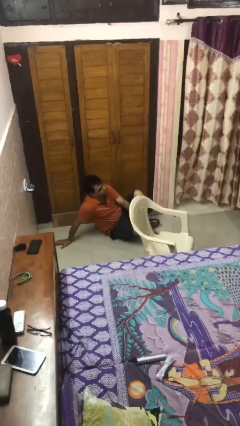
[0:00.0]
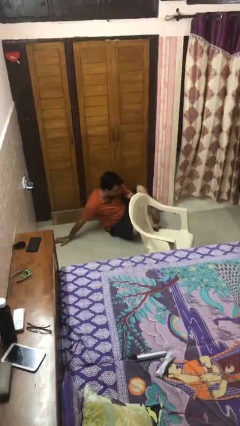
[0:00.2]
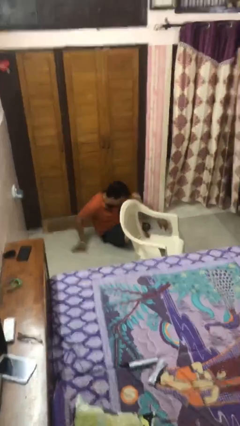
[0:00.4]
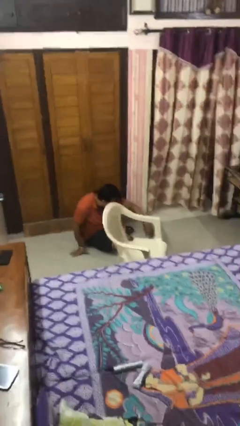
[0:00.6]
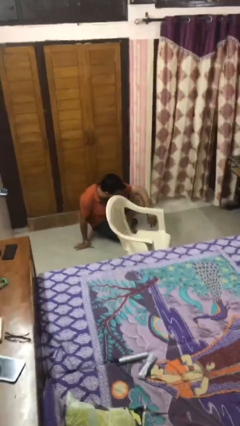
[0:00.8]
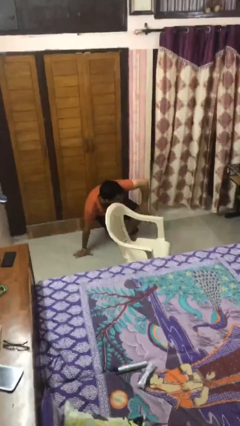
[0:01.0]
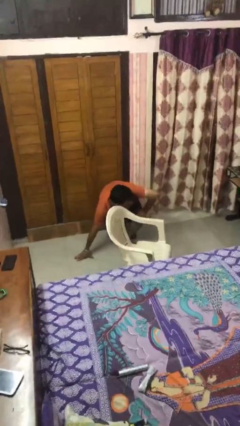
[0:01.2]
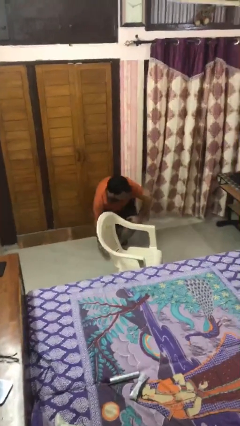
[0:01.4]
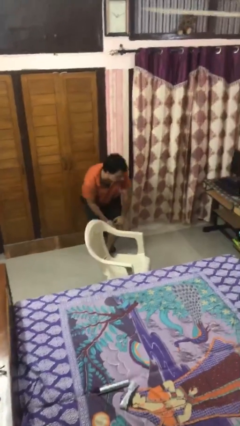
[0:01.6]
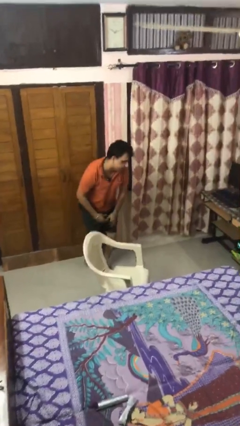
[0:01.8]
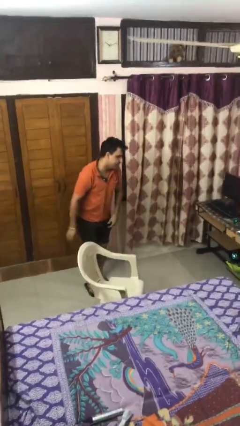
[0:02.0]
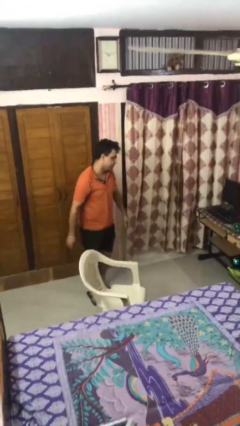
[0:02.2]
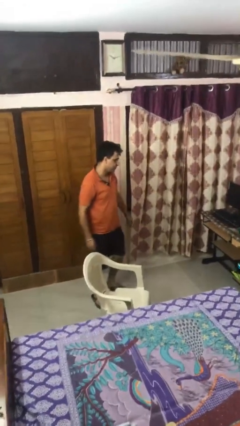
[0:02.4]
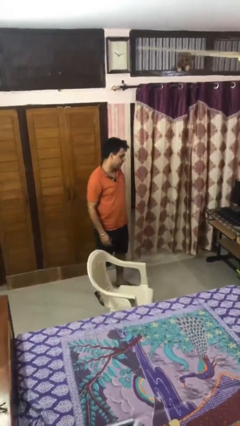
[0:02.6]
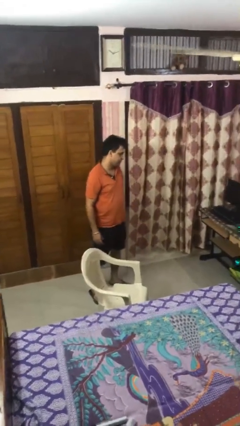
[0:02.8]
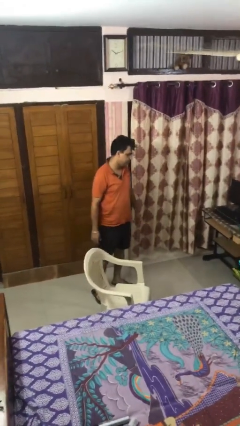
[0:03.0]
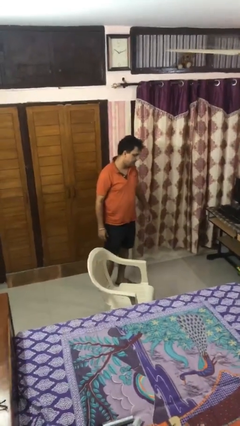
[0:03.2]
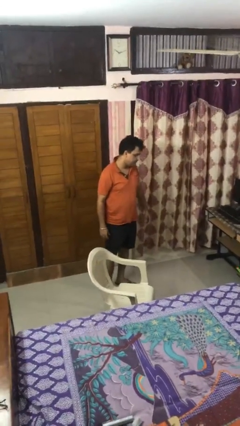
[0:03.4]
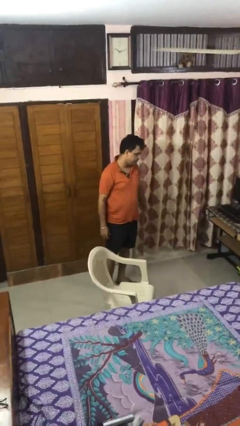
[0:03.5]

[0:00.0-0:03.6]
person stands up from floor

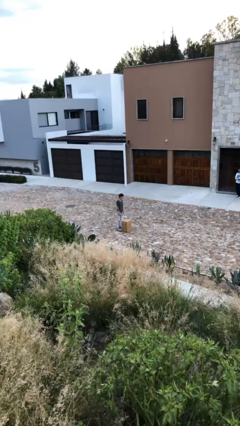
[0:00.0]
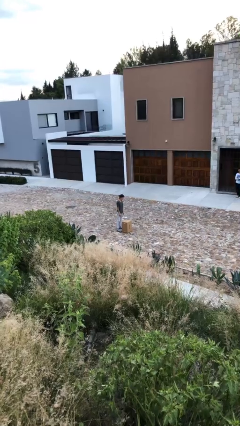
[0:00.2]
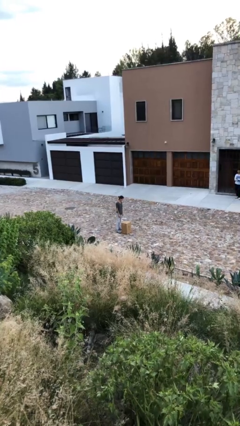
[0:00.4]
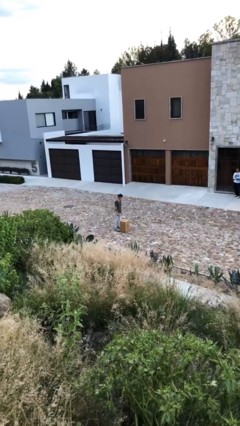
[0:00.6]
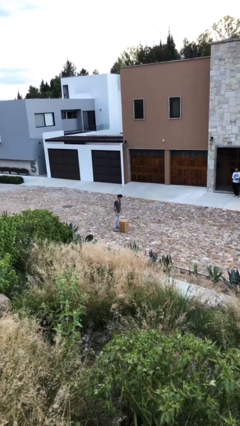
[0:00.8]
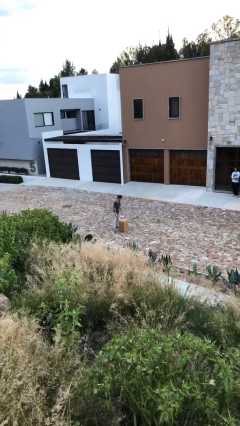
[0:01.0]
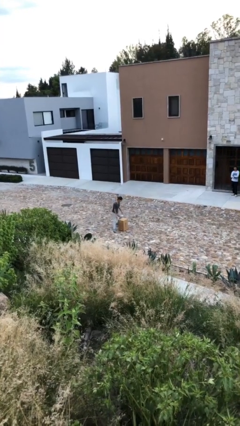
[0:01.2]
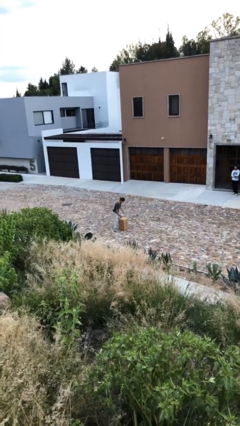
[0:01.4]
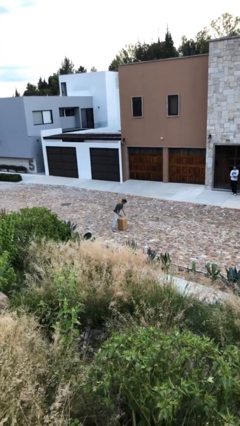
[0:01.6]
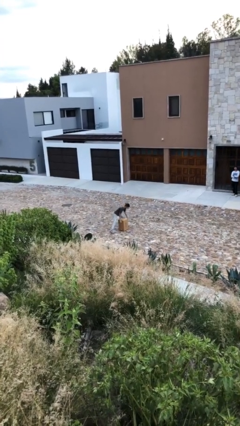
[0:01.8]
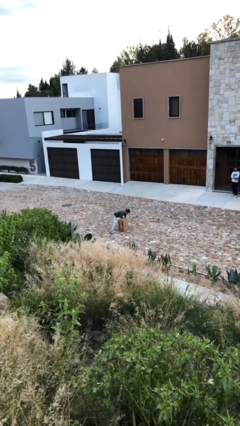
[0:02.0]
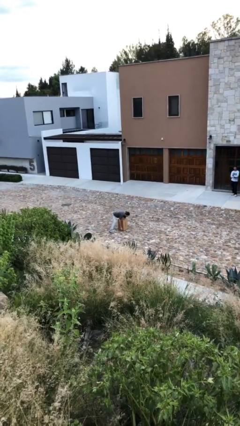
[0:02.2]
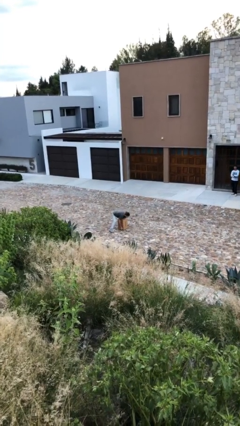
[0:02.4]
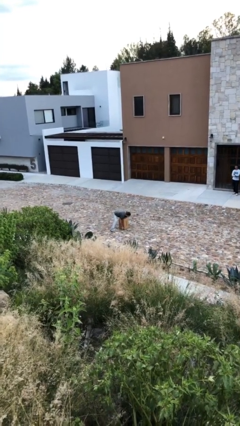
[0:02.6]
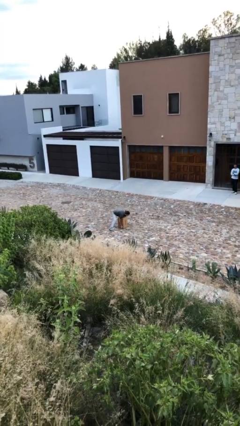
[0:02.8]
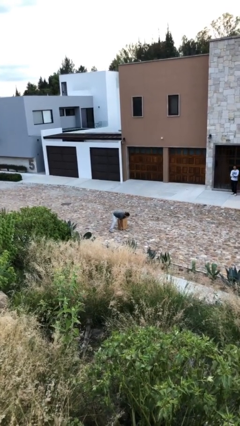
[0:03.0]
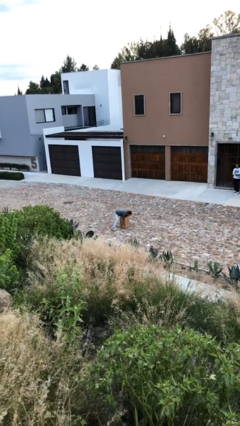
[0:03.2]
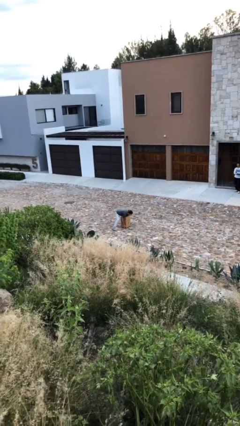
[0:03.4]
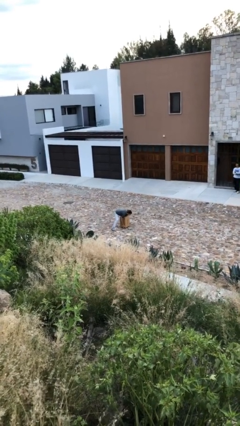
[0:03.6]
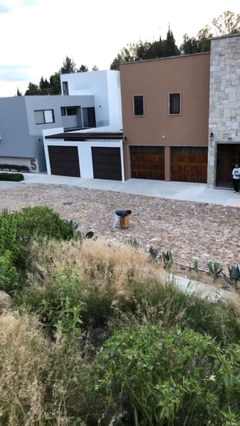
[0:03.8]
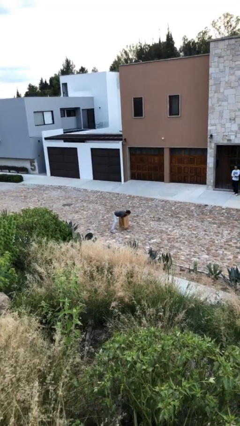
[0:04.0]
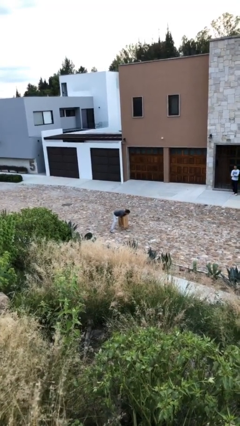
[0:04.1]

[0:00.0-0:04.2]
person picks up object from floor

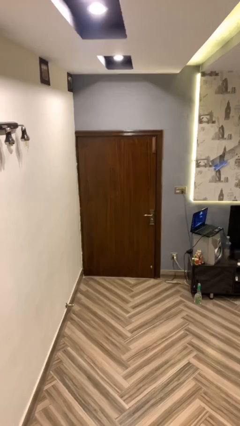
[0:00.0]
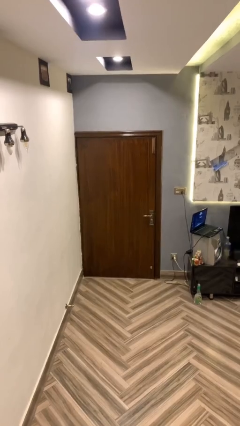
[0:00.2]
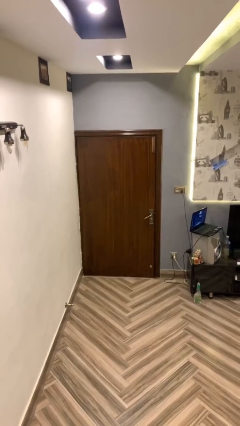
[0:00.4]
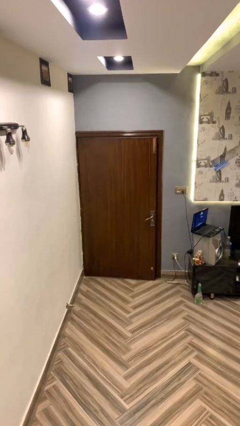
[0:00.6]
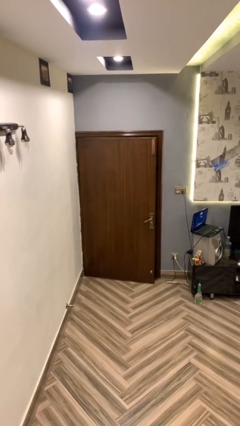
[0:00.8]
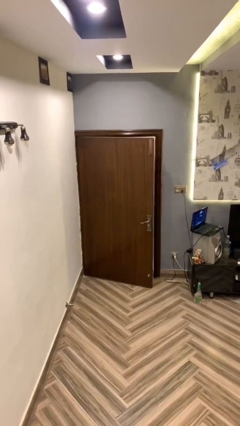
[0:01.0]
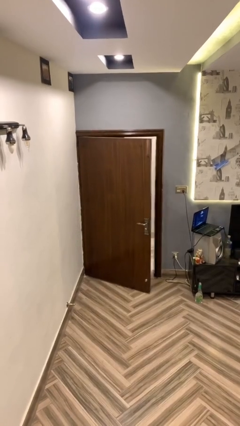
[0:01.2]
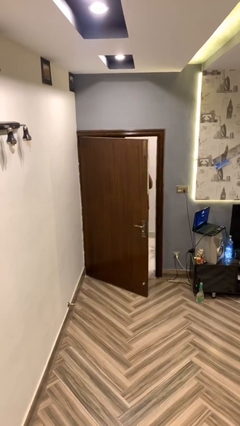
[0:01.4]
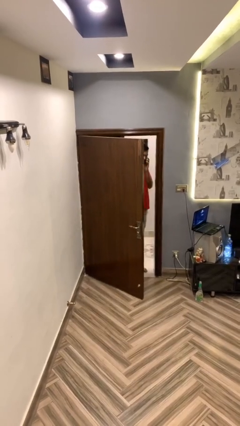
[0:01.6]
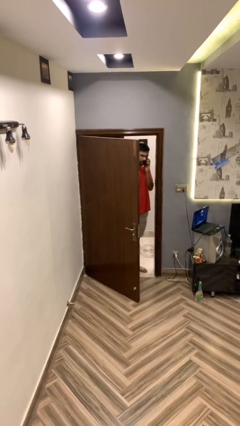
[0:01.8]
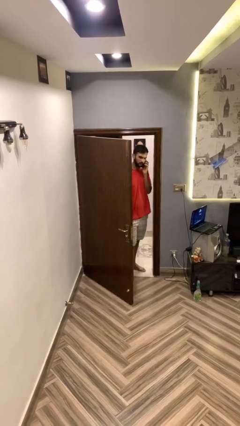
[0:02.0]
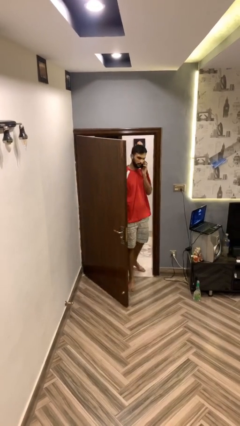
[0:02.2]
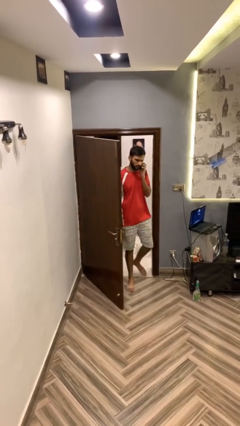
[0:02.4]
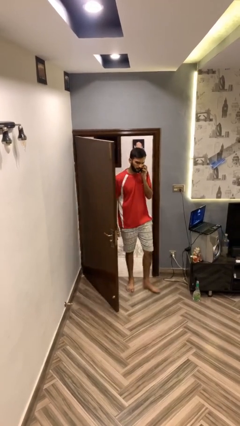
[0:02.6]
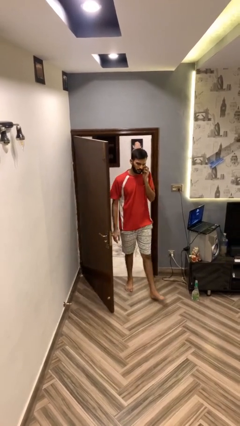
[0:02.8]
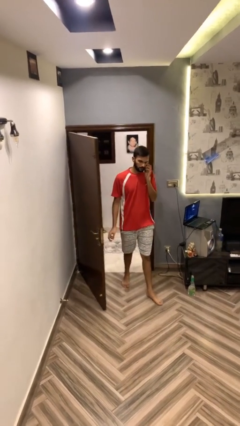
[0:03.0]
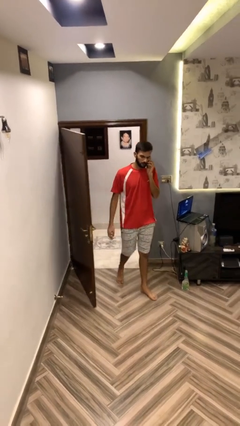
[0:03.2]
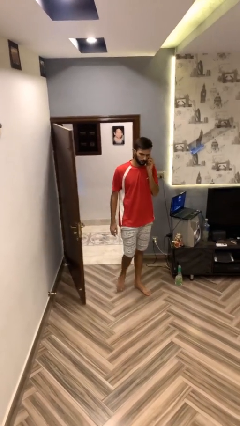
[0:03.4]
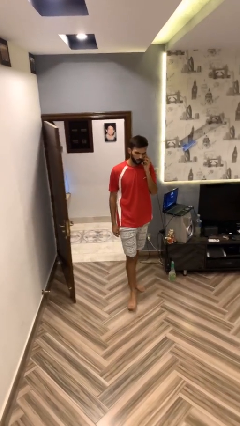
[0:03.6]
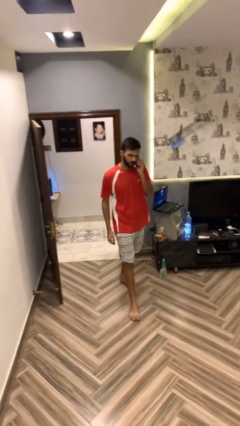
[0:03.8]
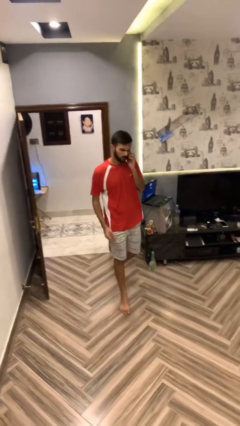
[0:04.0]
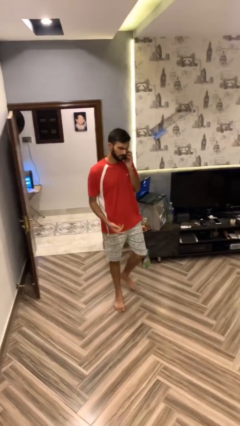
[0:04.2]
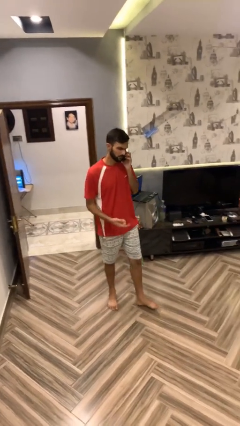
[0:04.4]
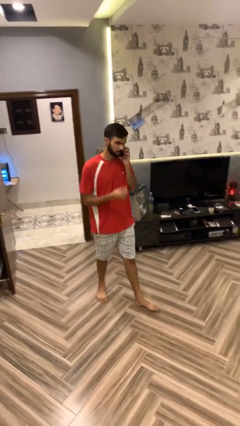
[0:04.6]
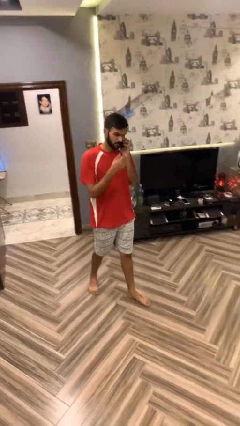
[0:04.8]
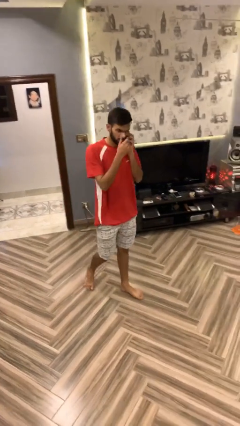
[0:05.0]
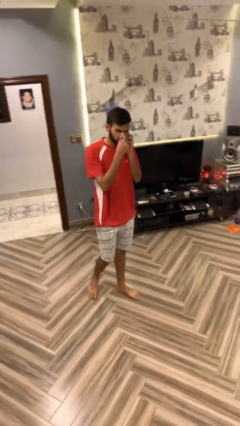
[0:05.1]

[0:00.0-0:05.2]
person enters scene through structure

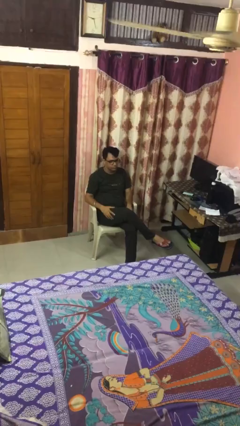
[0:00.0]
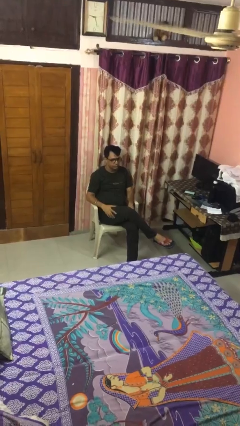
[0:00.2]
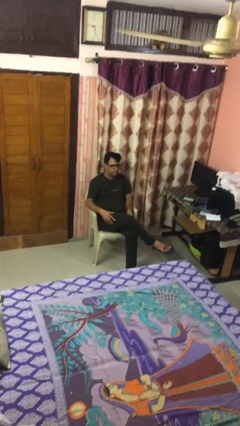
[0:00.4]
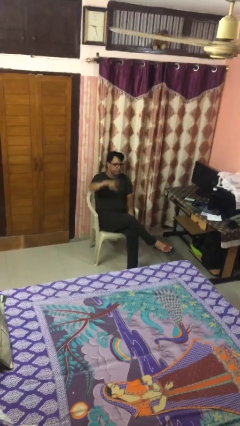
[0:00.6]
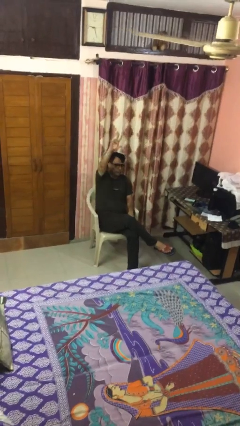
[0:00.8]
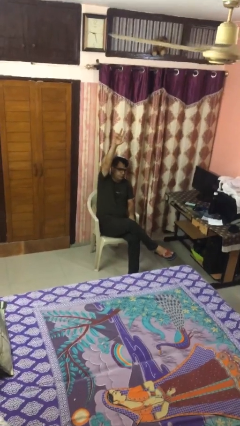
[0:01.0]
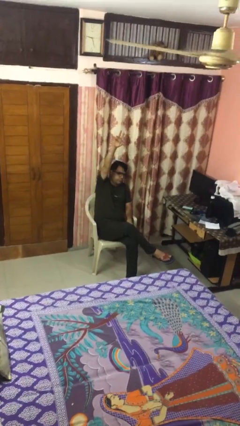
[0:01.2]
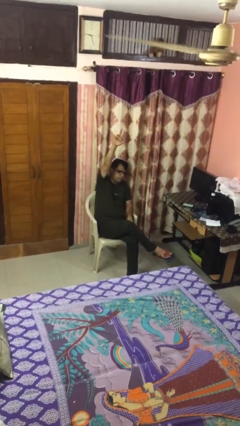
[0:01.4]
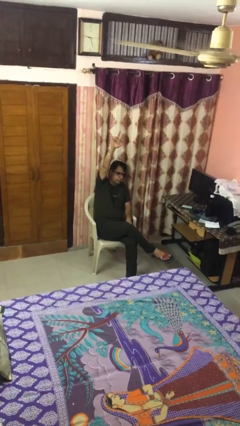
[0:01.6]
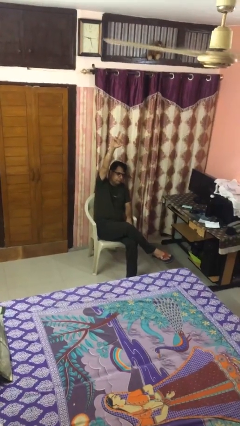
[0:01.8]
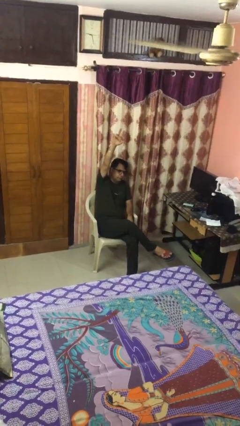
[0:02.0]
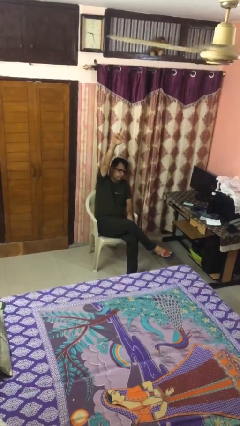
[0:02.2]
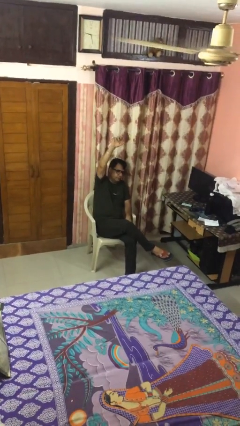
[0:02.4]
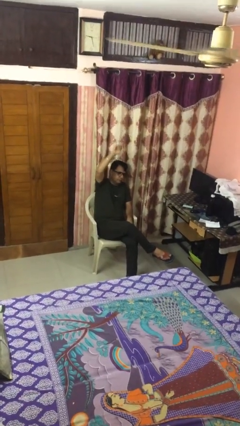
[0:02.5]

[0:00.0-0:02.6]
person gestures raise hand

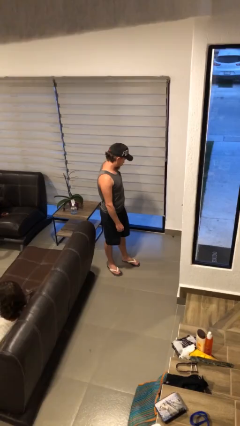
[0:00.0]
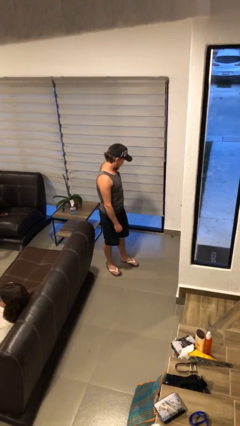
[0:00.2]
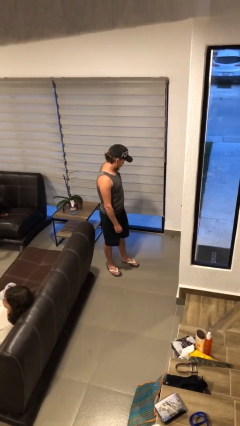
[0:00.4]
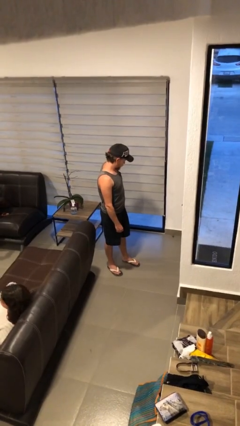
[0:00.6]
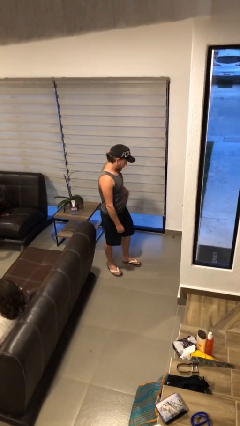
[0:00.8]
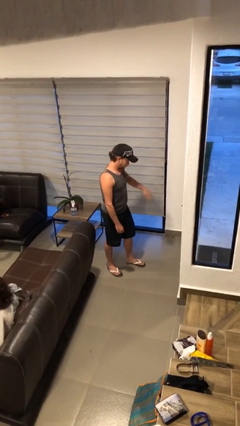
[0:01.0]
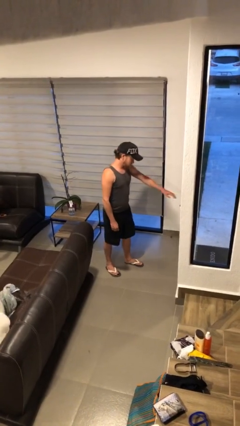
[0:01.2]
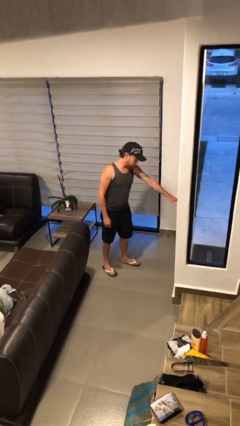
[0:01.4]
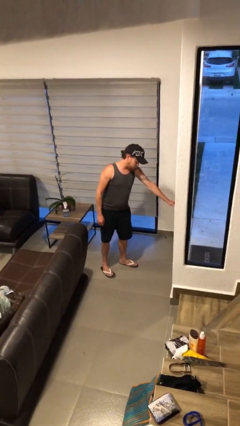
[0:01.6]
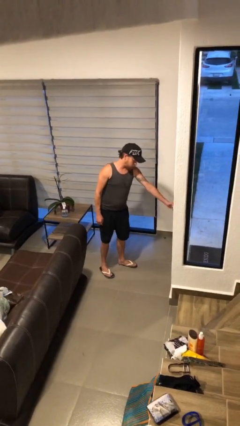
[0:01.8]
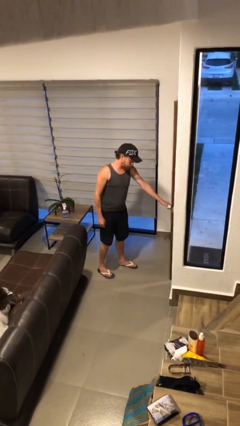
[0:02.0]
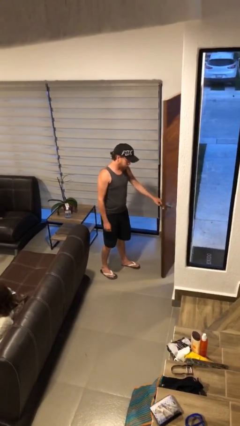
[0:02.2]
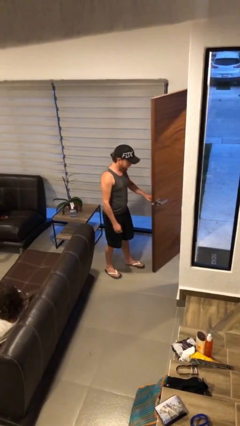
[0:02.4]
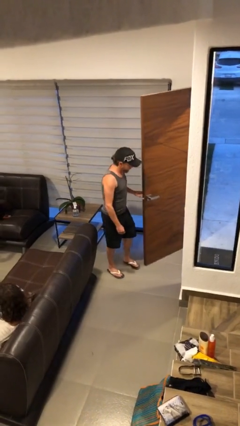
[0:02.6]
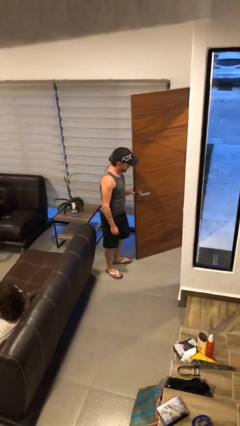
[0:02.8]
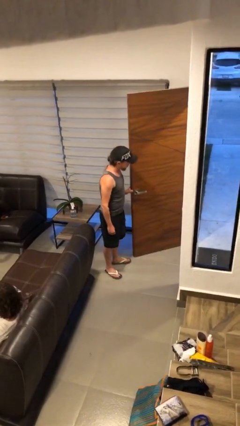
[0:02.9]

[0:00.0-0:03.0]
person opens facility door
